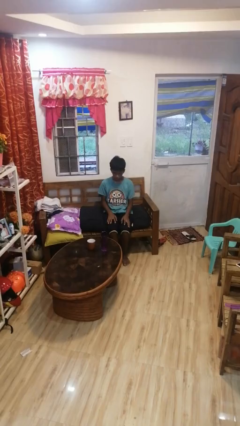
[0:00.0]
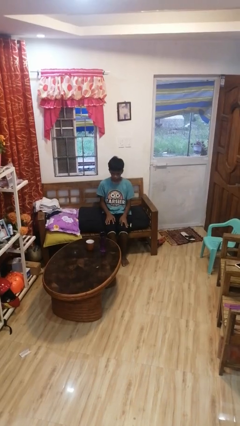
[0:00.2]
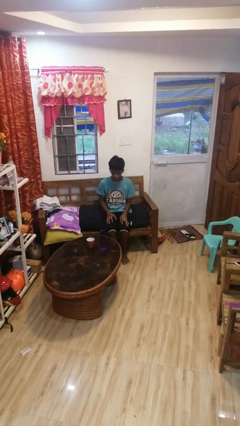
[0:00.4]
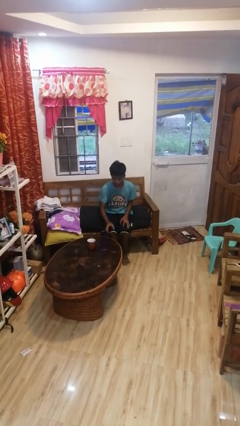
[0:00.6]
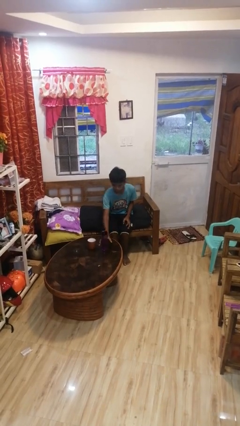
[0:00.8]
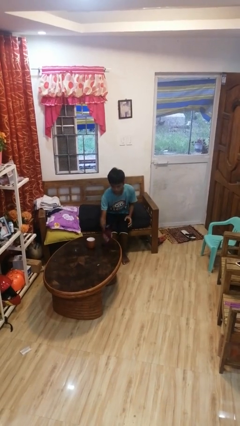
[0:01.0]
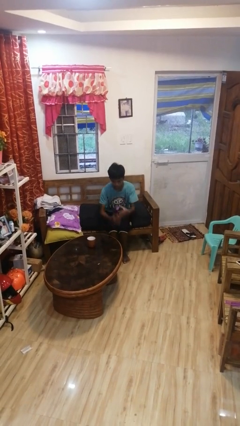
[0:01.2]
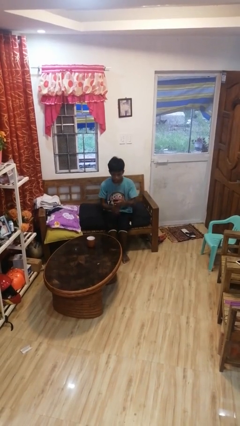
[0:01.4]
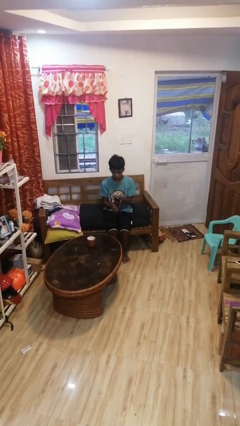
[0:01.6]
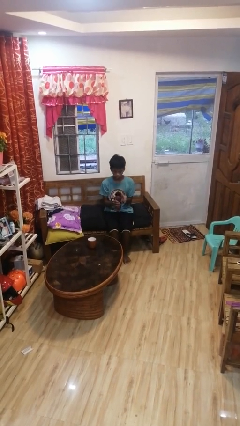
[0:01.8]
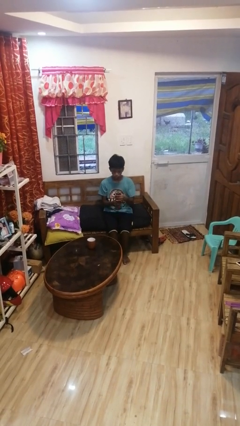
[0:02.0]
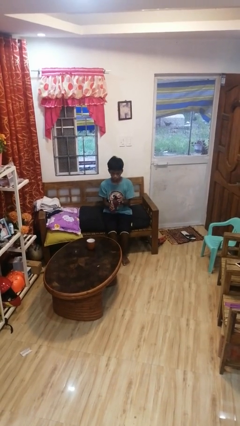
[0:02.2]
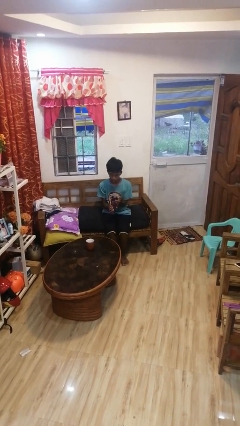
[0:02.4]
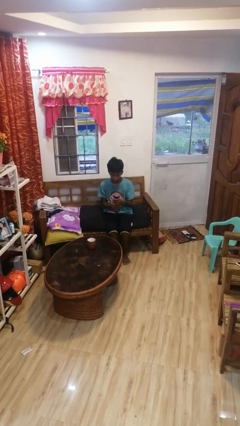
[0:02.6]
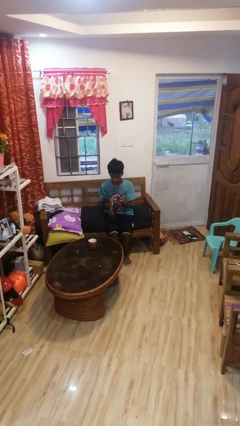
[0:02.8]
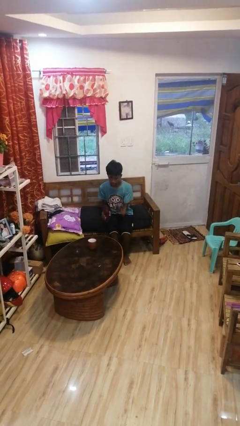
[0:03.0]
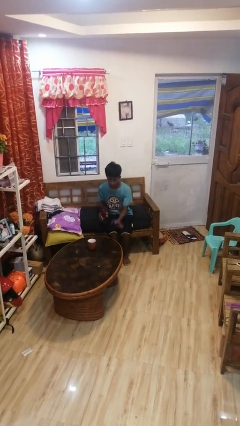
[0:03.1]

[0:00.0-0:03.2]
person unscrews lid from bottle

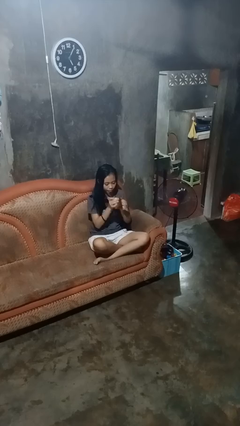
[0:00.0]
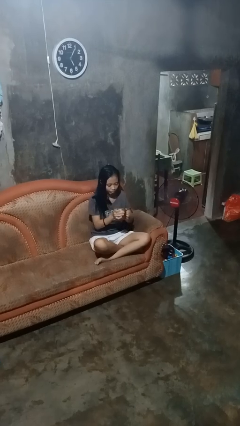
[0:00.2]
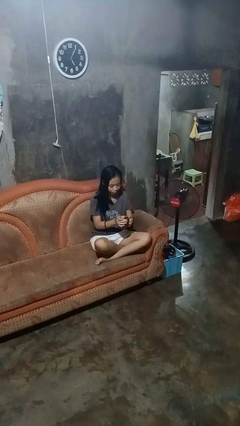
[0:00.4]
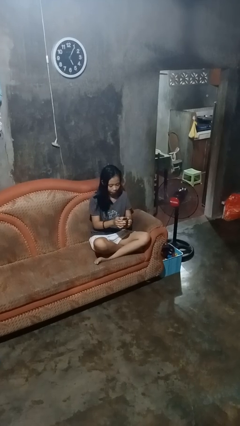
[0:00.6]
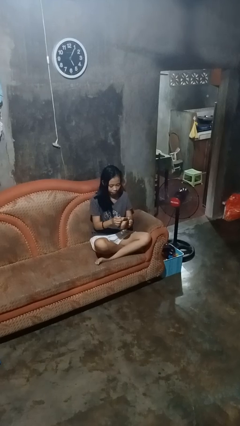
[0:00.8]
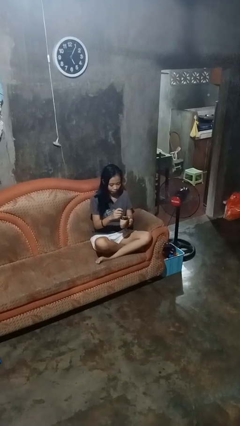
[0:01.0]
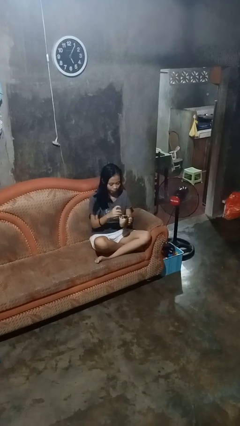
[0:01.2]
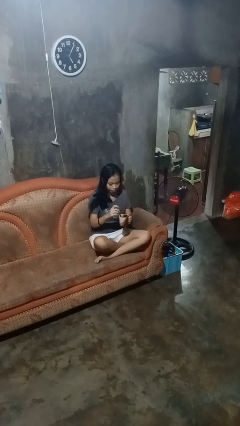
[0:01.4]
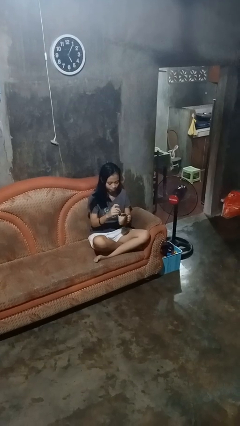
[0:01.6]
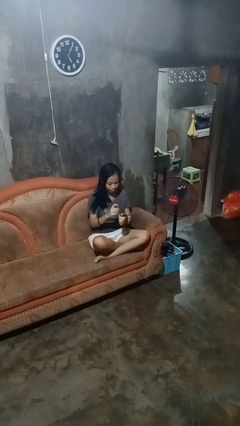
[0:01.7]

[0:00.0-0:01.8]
person stirs mug

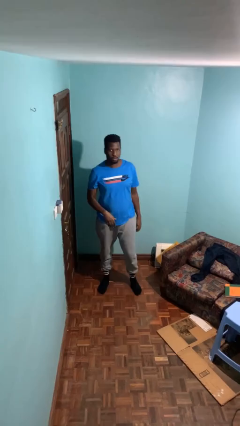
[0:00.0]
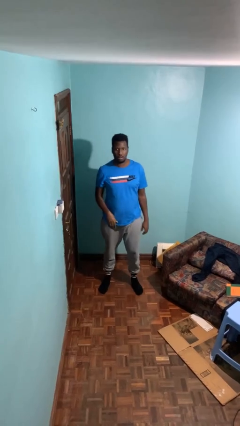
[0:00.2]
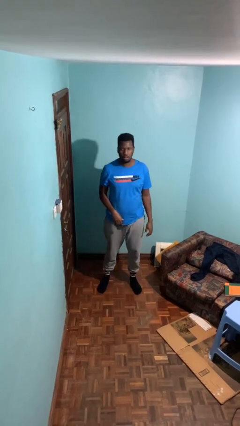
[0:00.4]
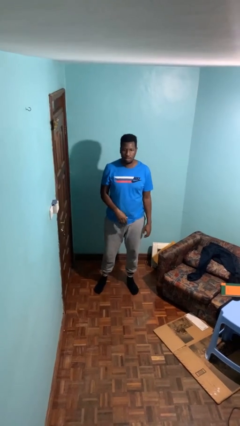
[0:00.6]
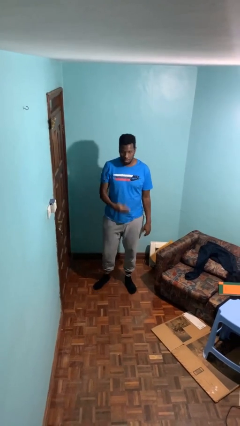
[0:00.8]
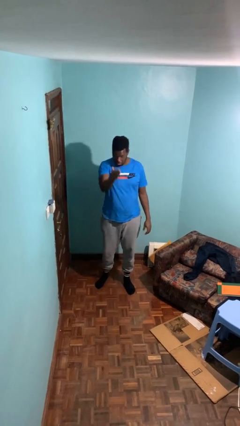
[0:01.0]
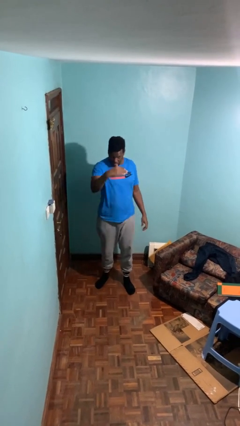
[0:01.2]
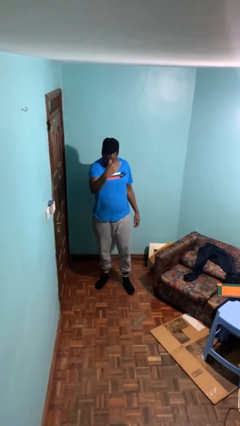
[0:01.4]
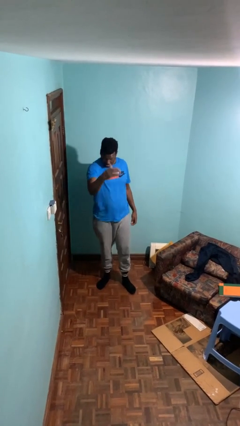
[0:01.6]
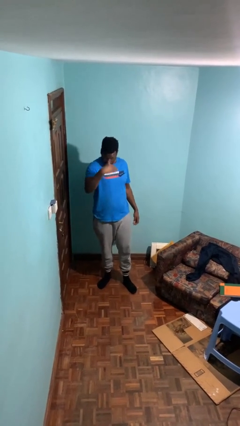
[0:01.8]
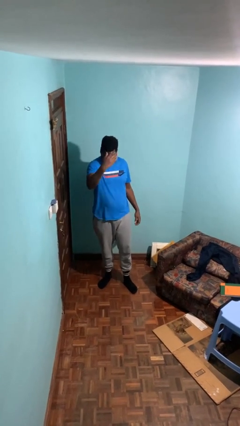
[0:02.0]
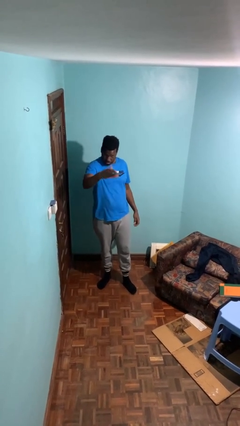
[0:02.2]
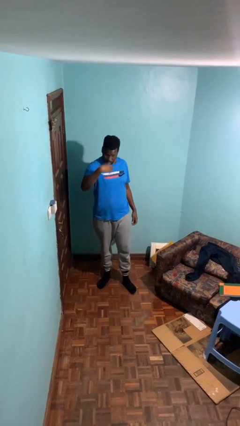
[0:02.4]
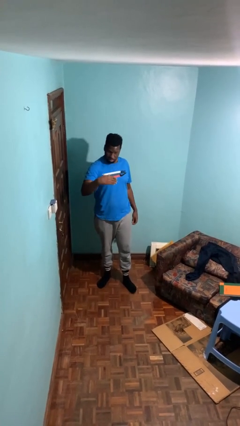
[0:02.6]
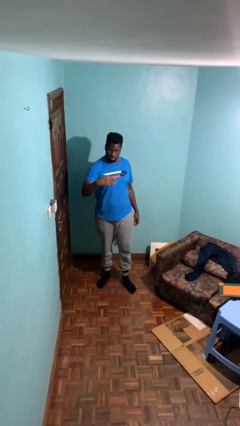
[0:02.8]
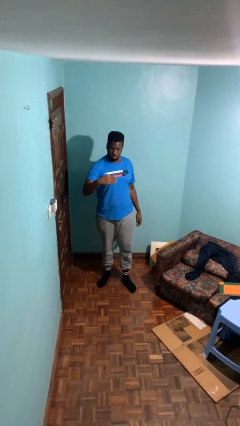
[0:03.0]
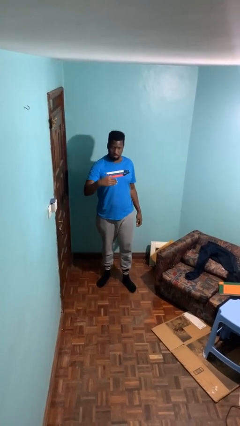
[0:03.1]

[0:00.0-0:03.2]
person gestures come here

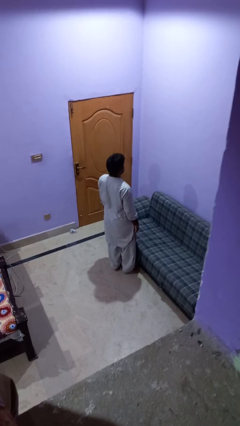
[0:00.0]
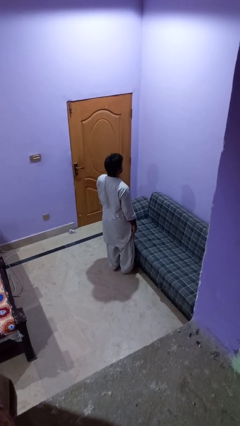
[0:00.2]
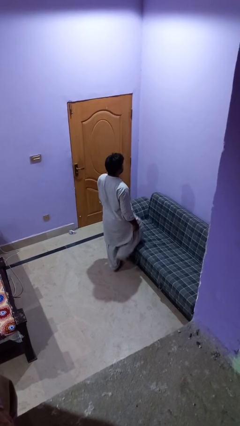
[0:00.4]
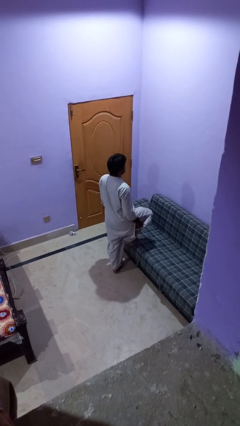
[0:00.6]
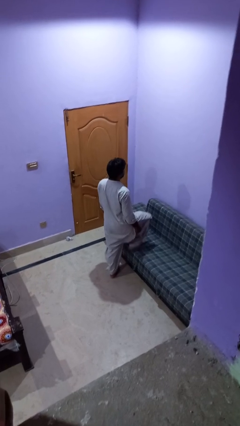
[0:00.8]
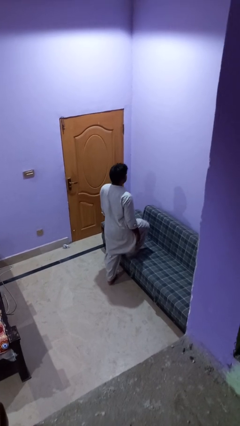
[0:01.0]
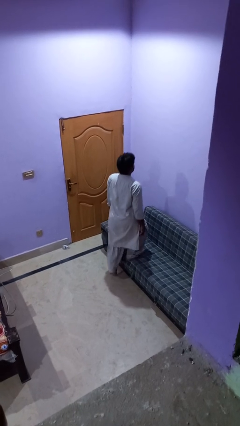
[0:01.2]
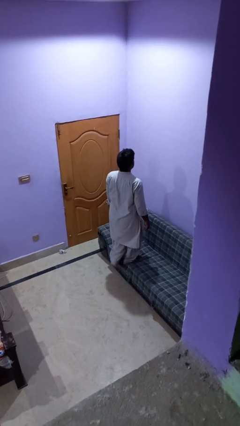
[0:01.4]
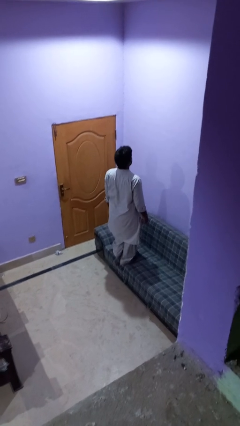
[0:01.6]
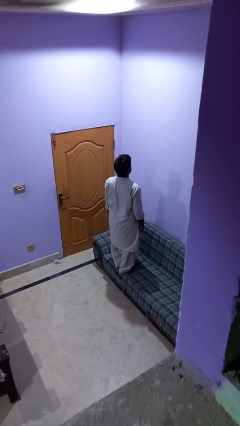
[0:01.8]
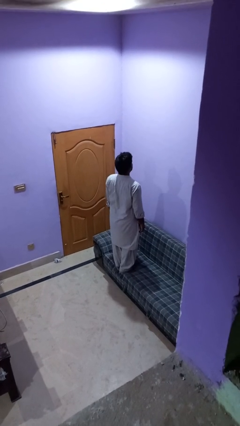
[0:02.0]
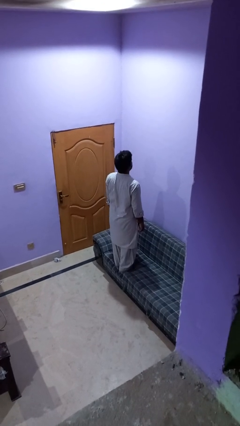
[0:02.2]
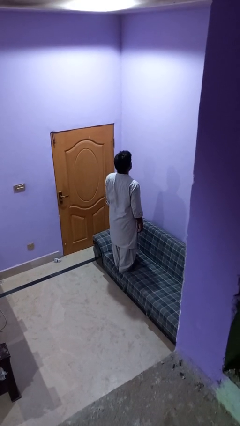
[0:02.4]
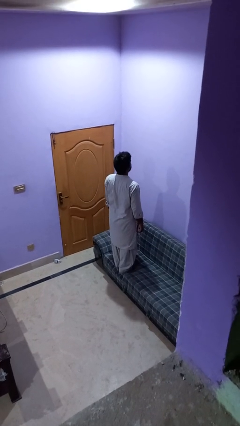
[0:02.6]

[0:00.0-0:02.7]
person climbs on couch

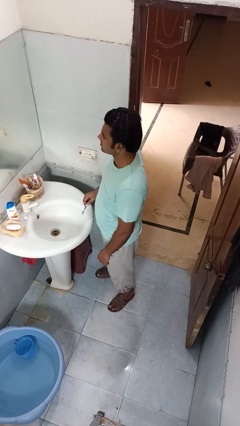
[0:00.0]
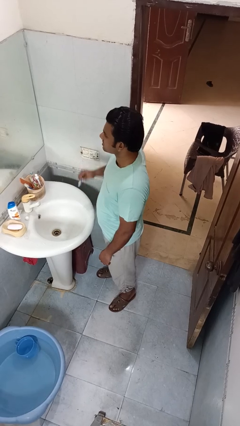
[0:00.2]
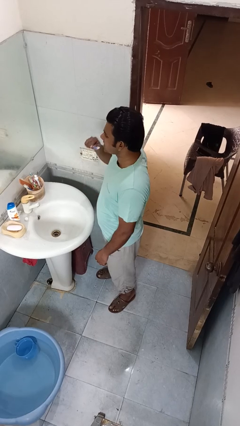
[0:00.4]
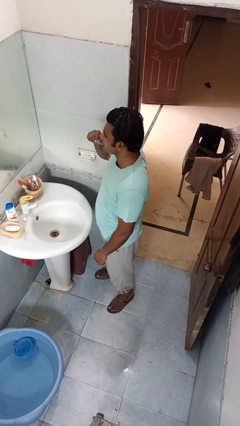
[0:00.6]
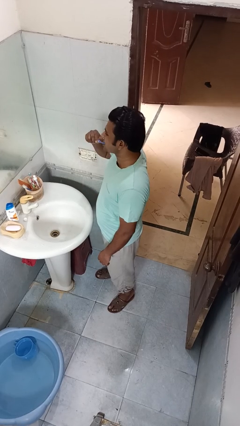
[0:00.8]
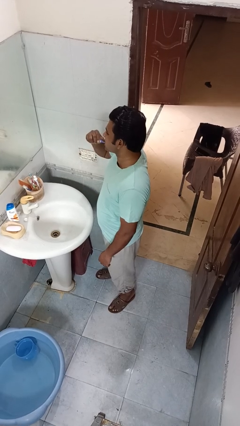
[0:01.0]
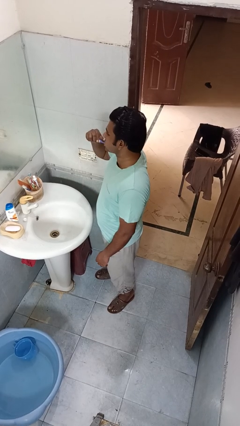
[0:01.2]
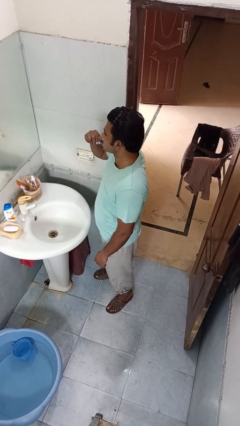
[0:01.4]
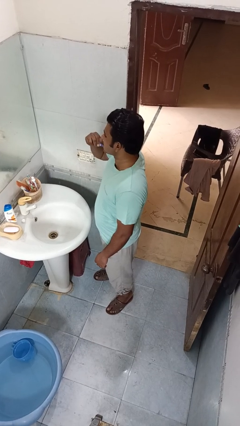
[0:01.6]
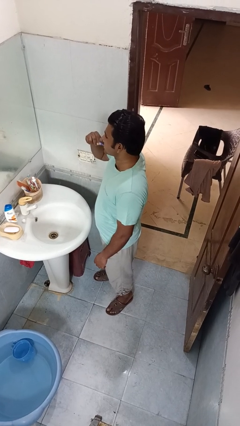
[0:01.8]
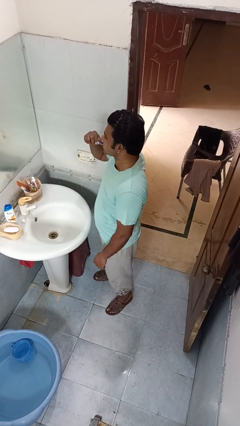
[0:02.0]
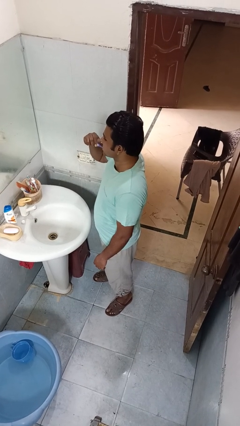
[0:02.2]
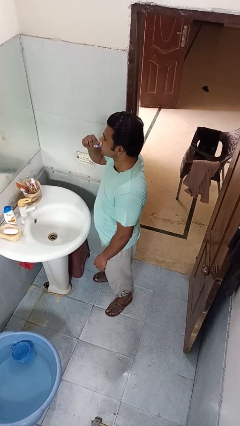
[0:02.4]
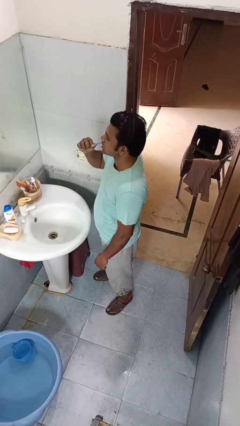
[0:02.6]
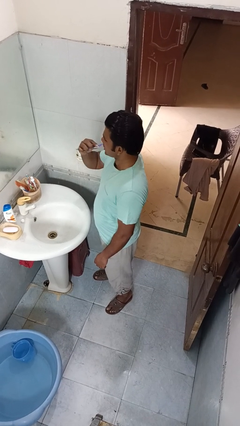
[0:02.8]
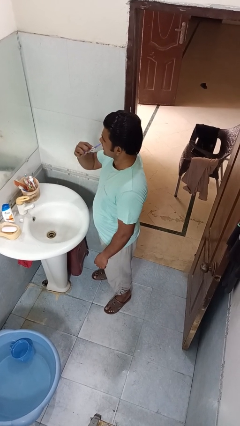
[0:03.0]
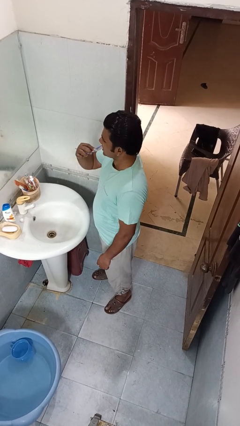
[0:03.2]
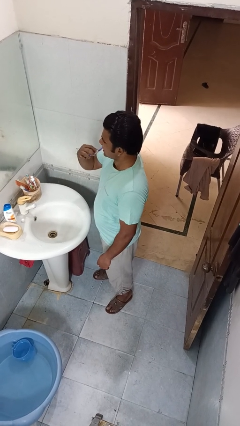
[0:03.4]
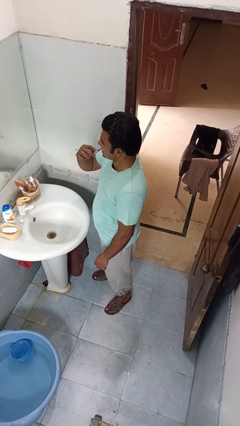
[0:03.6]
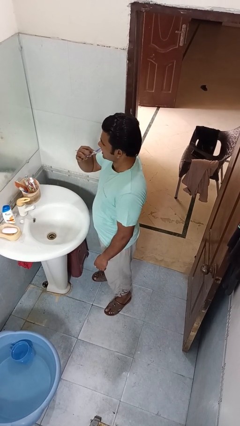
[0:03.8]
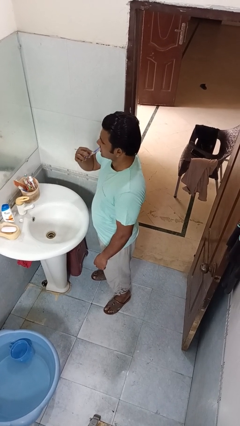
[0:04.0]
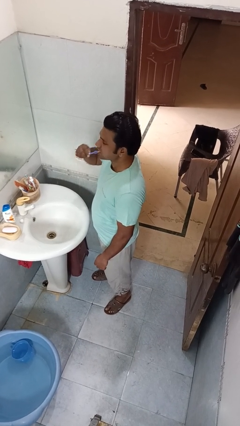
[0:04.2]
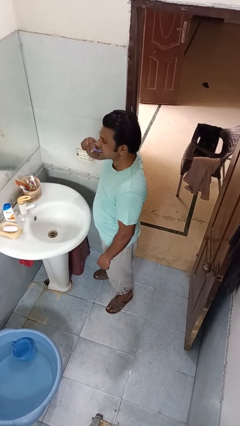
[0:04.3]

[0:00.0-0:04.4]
person brushes teeth

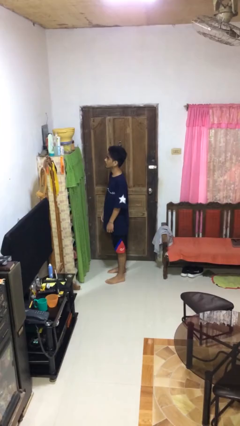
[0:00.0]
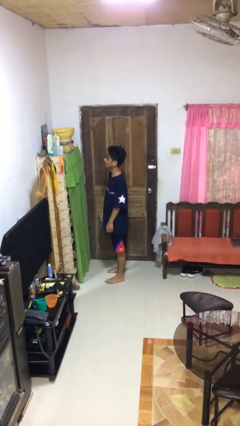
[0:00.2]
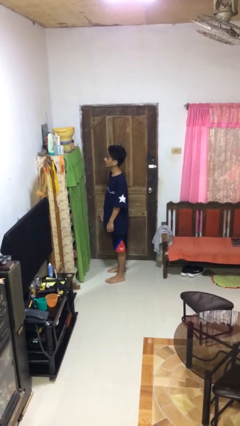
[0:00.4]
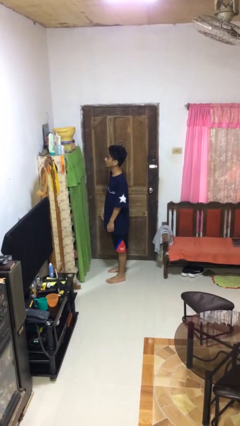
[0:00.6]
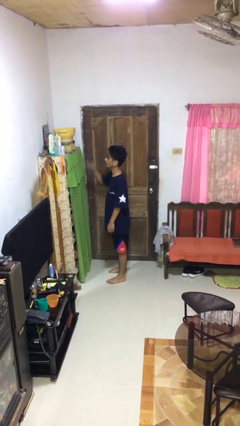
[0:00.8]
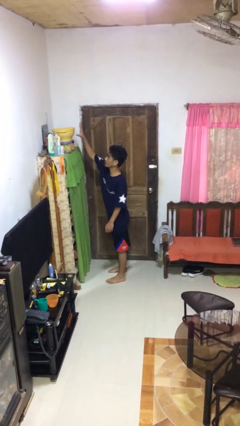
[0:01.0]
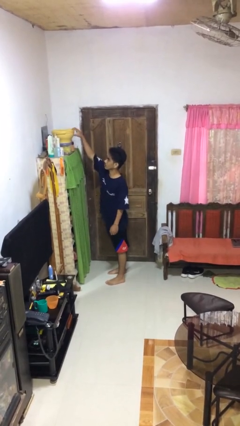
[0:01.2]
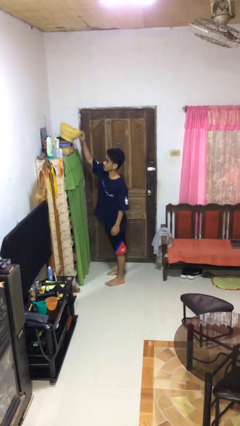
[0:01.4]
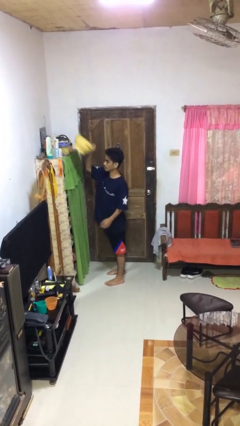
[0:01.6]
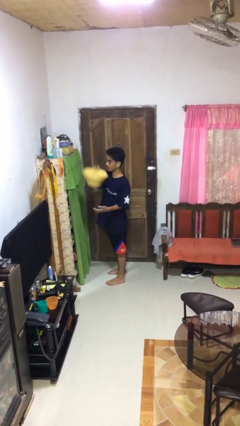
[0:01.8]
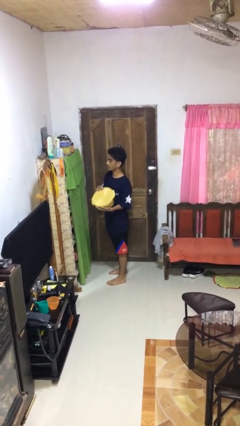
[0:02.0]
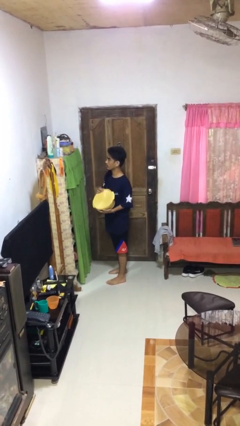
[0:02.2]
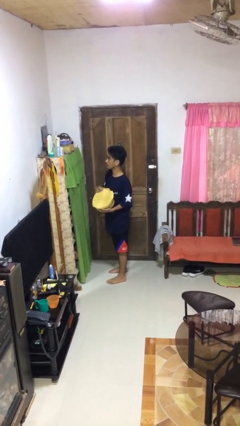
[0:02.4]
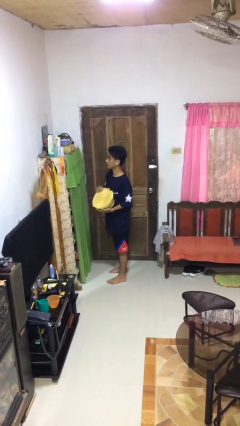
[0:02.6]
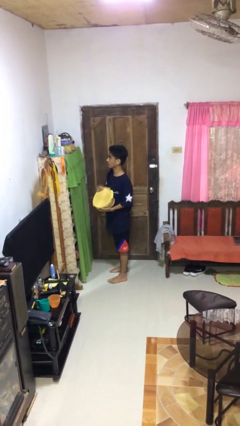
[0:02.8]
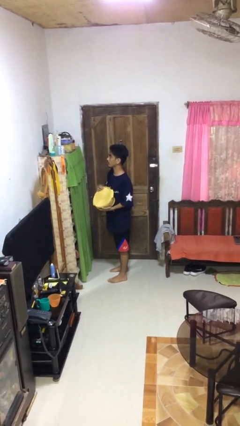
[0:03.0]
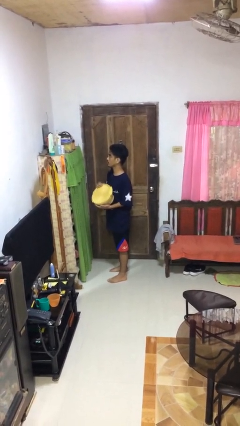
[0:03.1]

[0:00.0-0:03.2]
person picks up object from shelf
